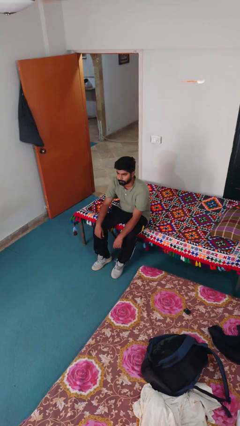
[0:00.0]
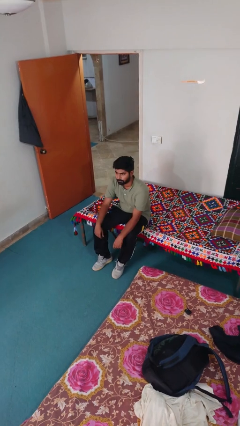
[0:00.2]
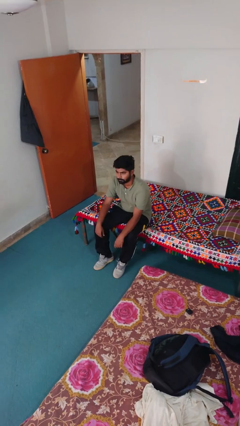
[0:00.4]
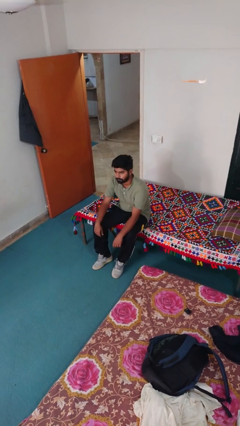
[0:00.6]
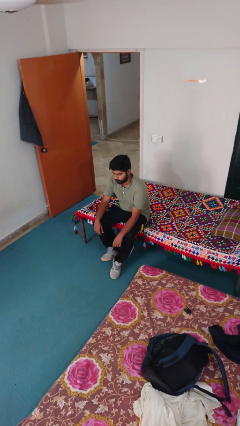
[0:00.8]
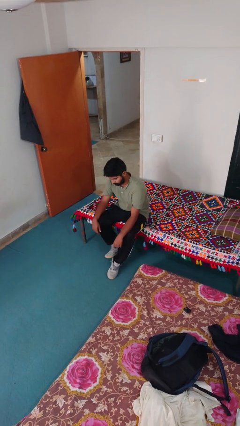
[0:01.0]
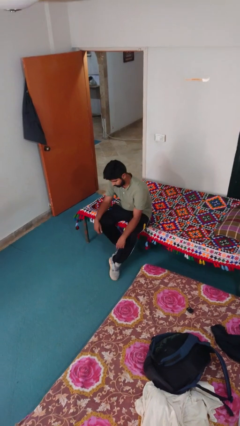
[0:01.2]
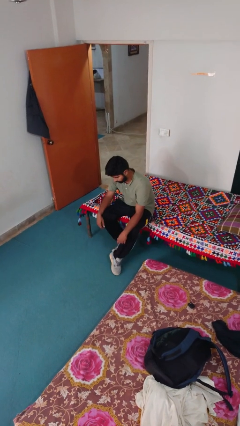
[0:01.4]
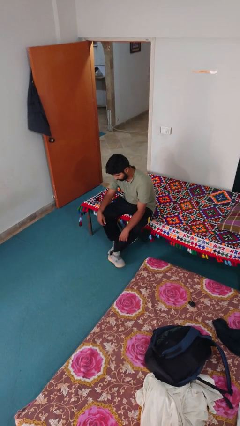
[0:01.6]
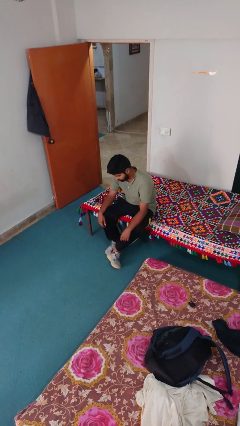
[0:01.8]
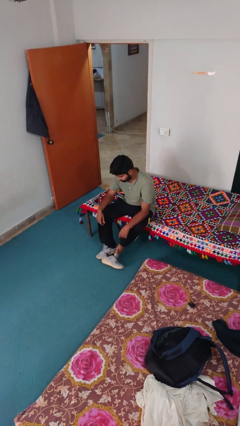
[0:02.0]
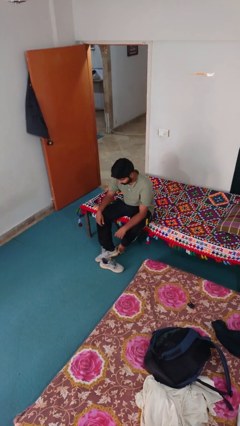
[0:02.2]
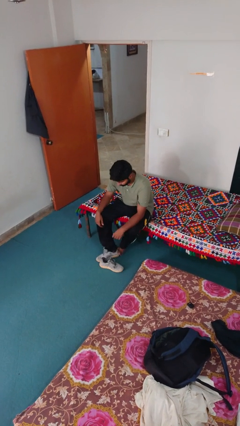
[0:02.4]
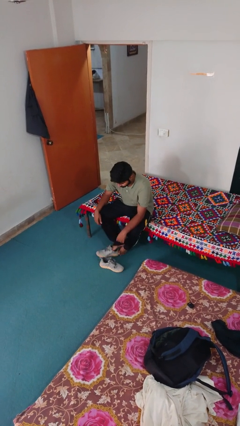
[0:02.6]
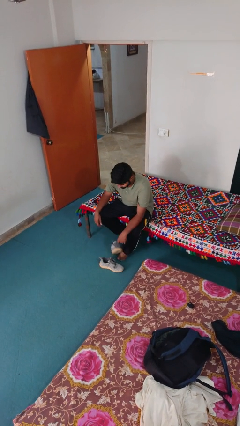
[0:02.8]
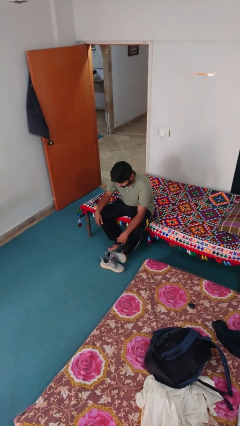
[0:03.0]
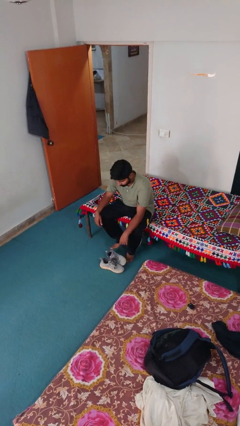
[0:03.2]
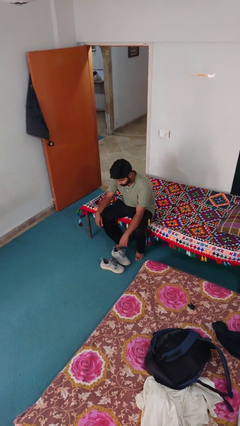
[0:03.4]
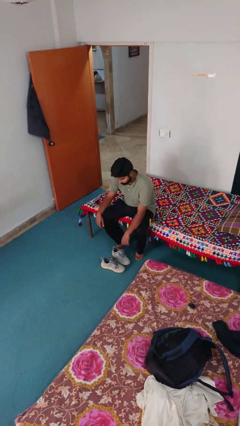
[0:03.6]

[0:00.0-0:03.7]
person takes off shoes

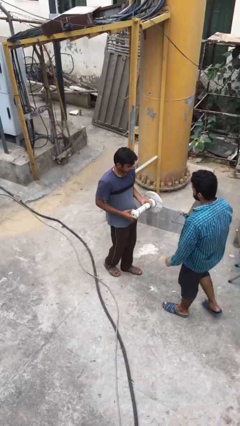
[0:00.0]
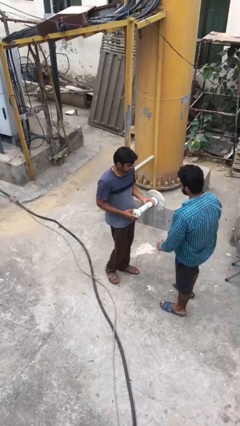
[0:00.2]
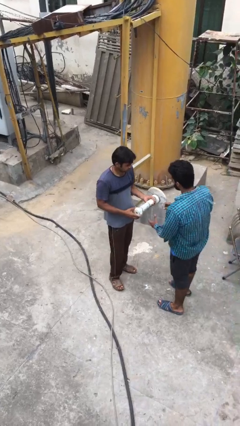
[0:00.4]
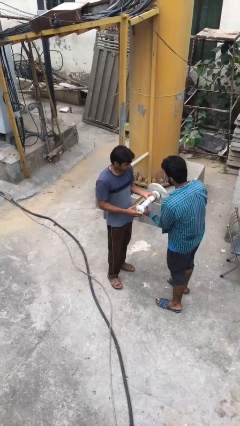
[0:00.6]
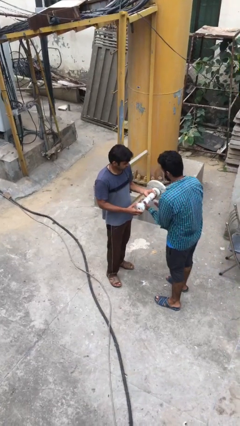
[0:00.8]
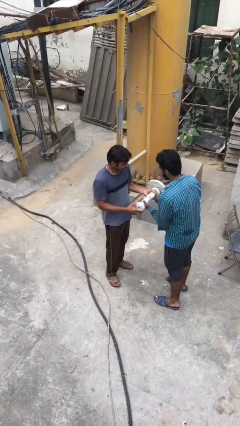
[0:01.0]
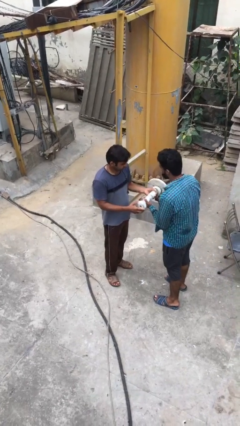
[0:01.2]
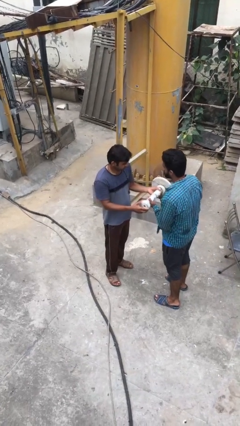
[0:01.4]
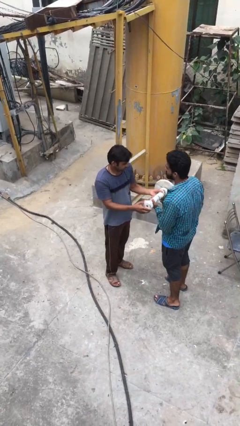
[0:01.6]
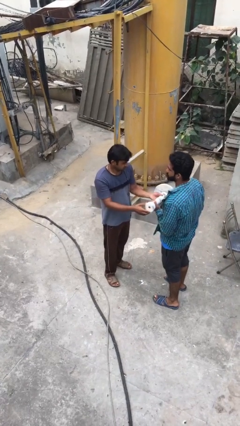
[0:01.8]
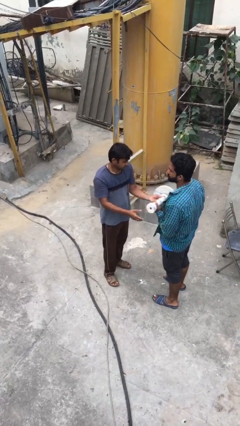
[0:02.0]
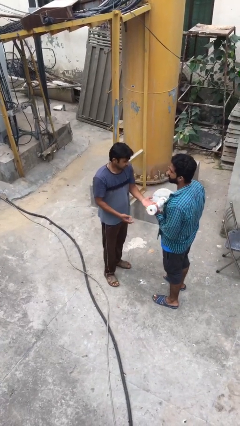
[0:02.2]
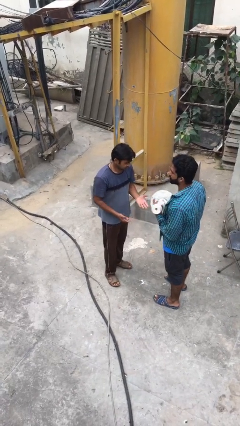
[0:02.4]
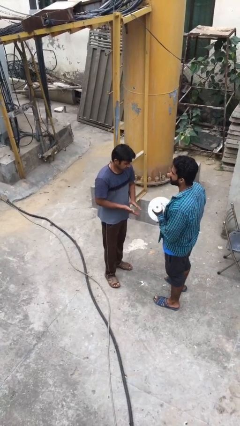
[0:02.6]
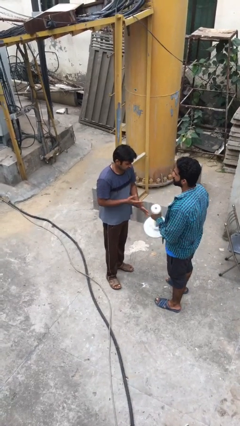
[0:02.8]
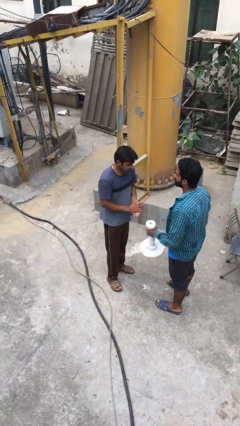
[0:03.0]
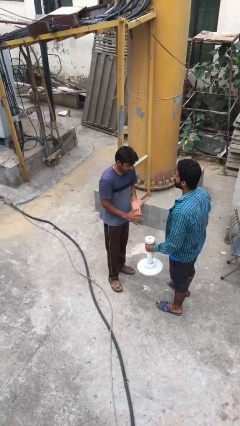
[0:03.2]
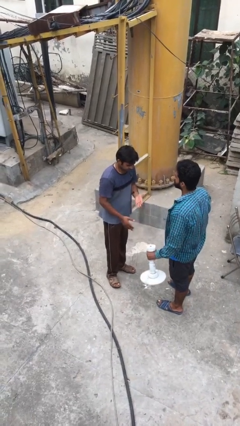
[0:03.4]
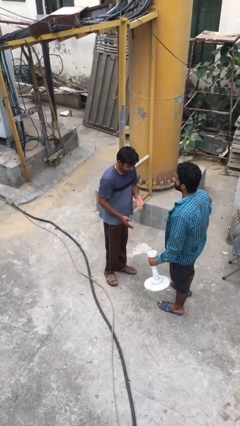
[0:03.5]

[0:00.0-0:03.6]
person transfers object to person

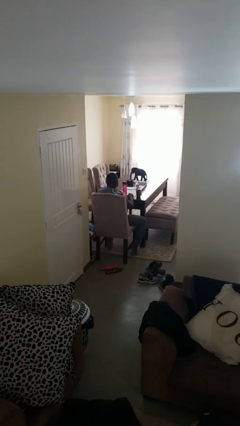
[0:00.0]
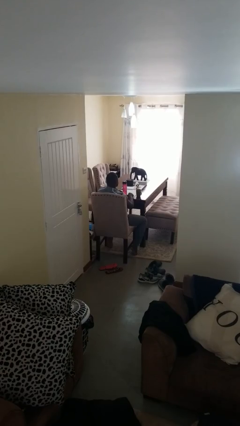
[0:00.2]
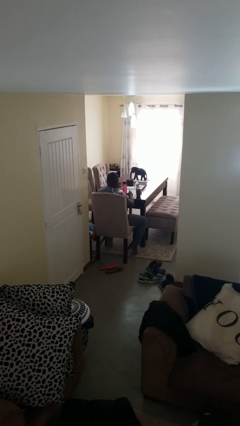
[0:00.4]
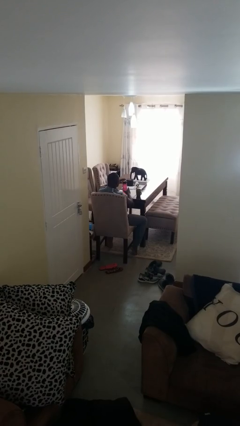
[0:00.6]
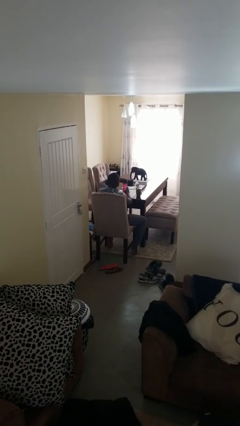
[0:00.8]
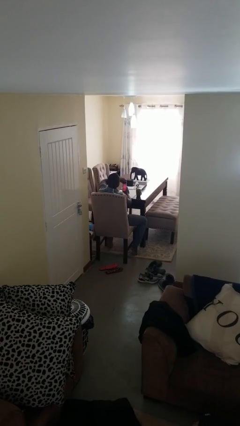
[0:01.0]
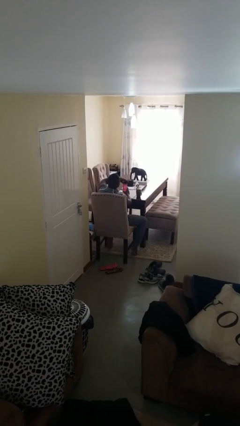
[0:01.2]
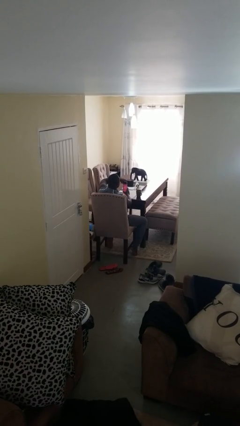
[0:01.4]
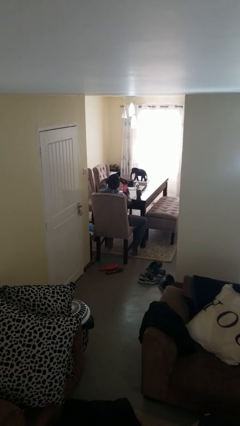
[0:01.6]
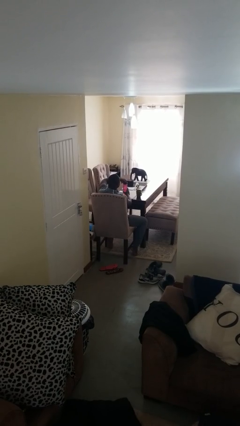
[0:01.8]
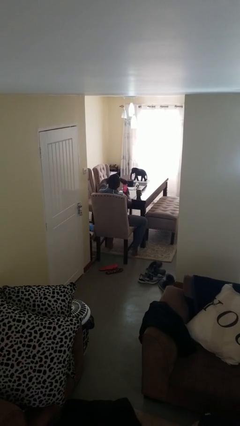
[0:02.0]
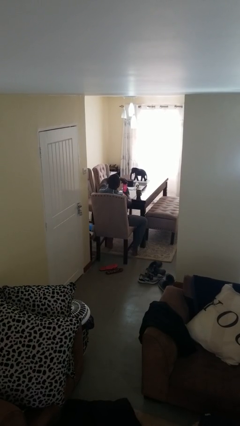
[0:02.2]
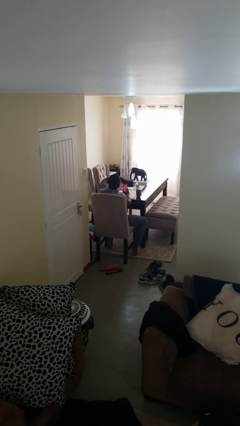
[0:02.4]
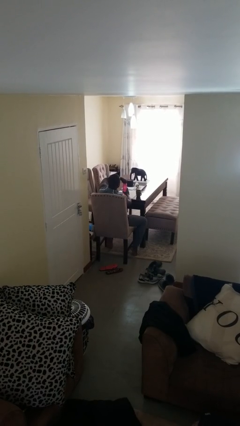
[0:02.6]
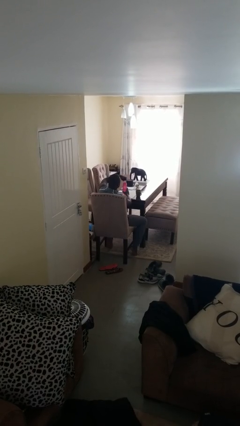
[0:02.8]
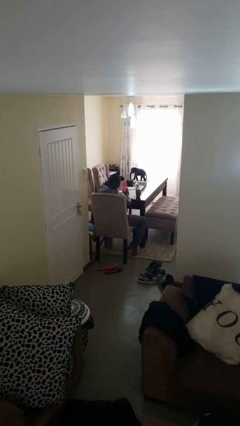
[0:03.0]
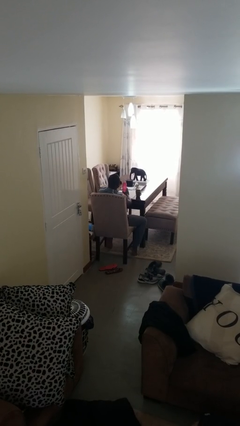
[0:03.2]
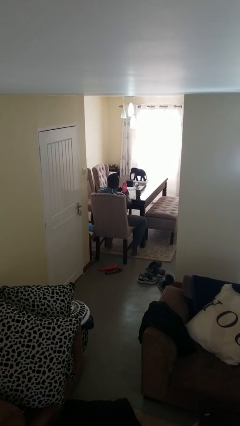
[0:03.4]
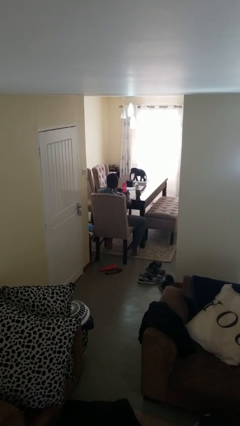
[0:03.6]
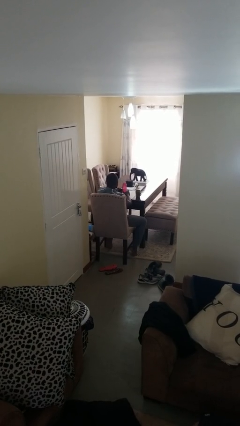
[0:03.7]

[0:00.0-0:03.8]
person unscrews lid from bottle

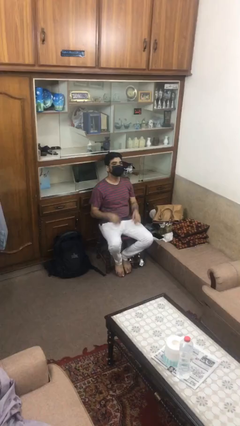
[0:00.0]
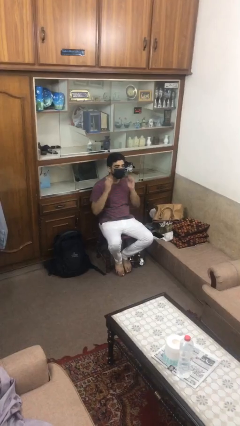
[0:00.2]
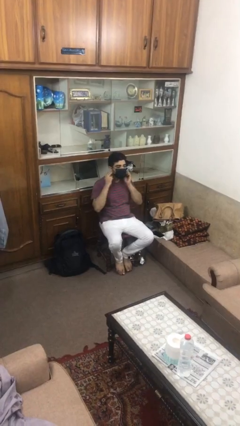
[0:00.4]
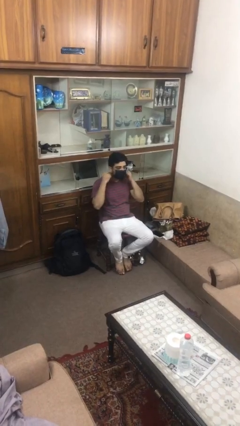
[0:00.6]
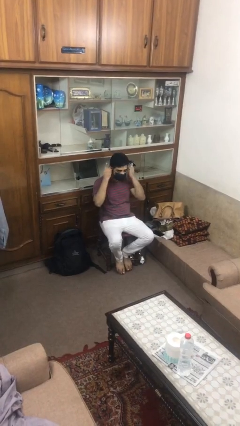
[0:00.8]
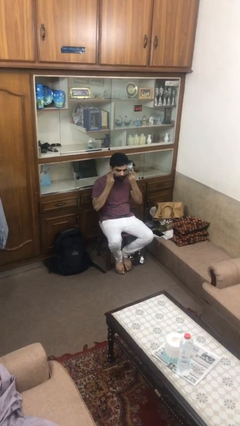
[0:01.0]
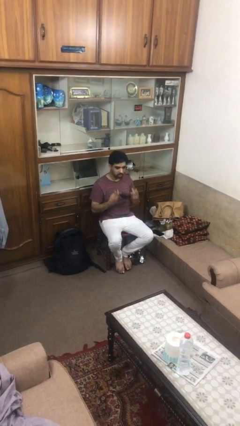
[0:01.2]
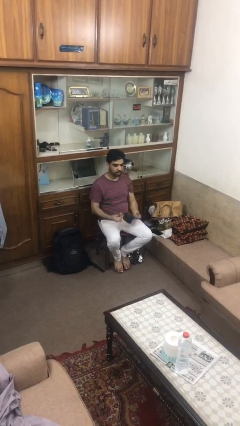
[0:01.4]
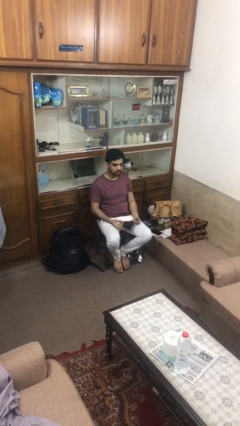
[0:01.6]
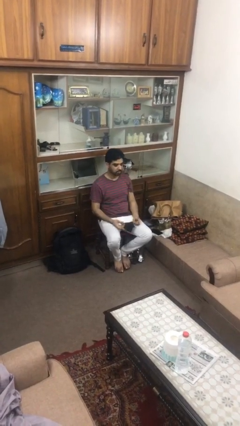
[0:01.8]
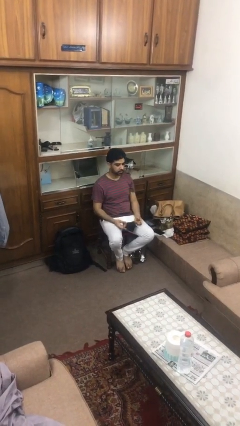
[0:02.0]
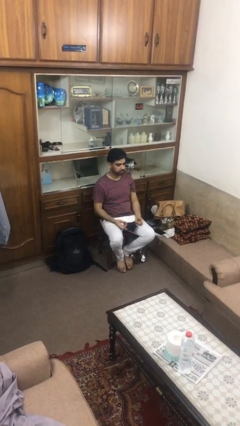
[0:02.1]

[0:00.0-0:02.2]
person takes off facemask

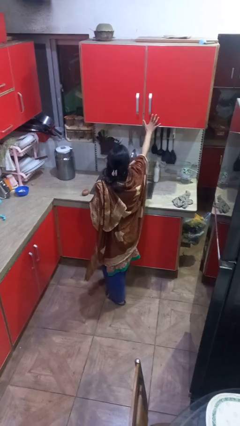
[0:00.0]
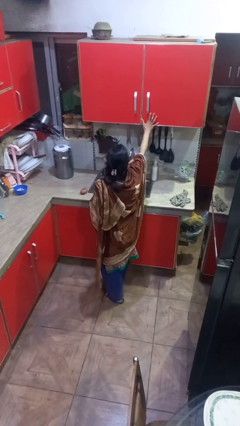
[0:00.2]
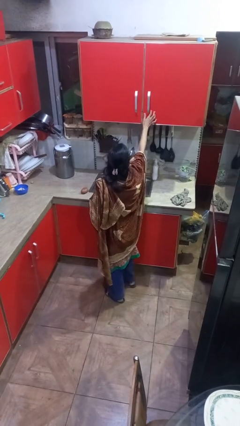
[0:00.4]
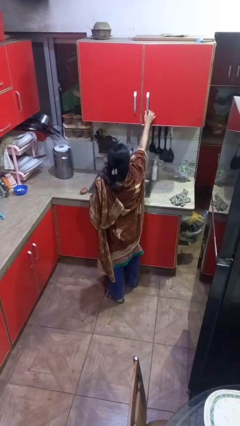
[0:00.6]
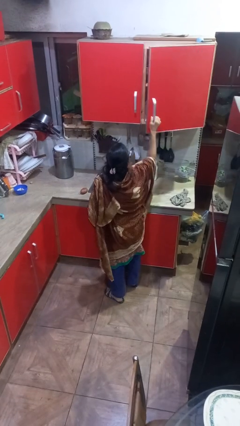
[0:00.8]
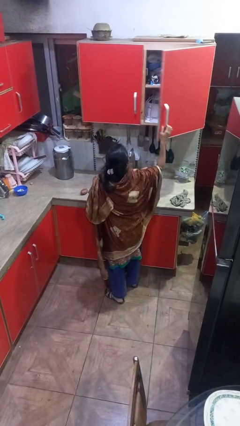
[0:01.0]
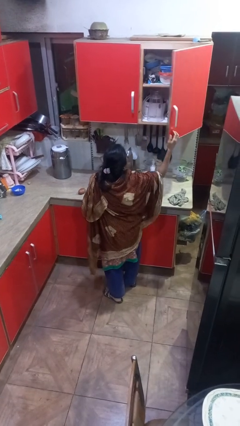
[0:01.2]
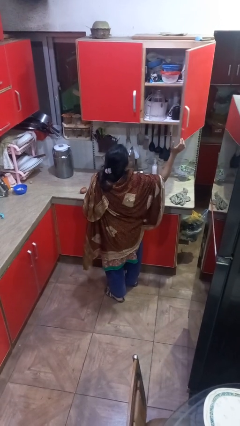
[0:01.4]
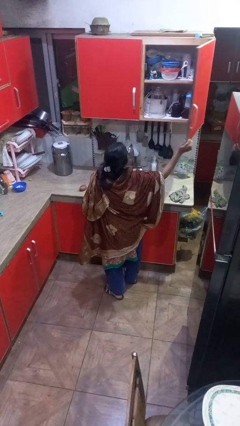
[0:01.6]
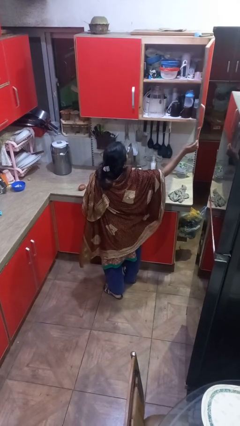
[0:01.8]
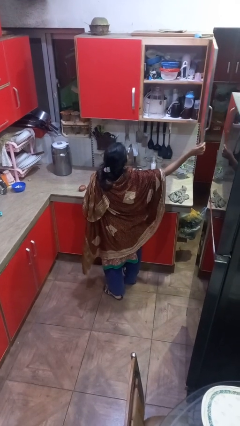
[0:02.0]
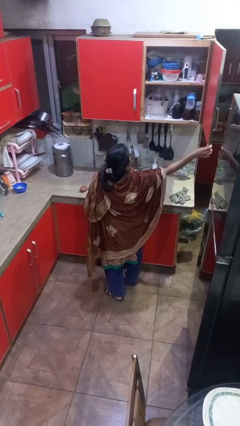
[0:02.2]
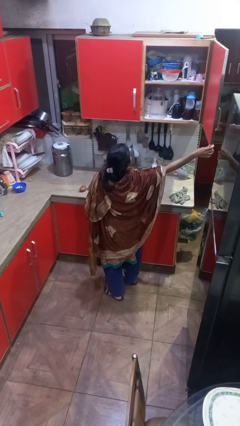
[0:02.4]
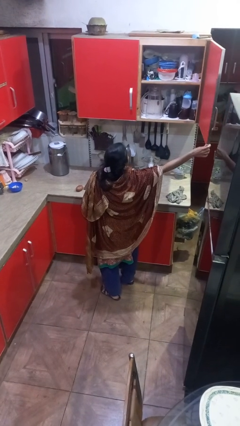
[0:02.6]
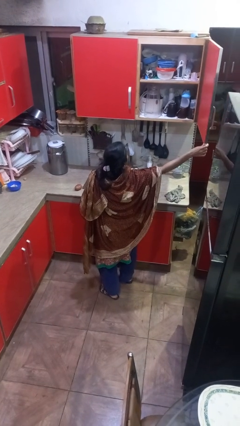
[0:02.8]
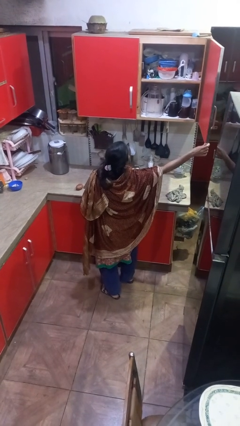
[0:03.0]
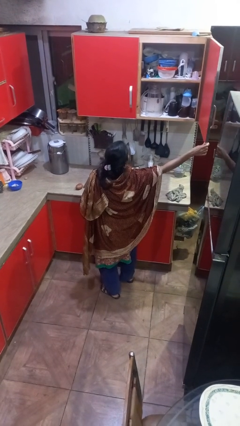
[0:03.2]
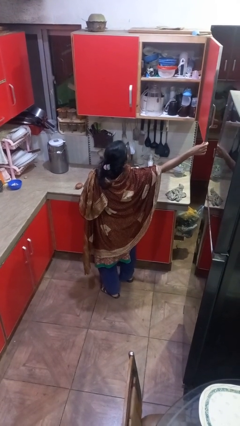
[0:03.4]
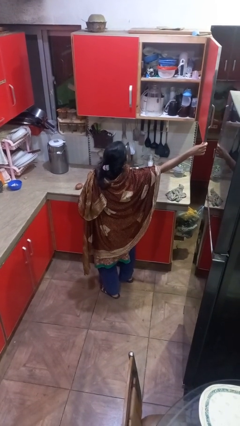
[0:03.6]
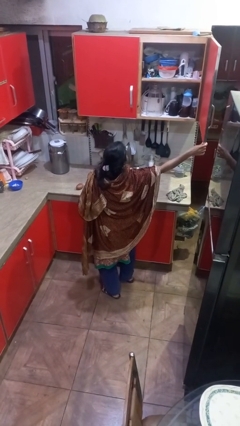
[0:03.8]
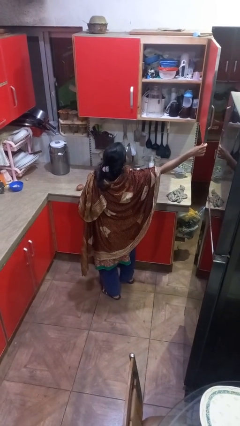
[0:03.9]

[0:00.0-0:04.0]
person opens cabinet

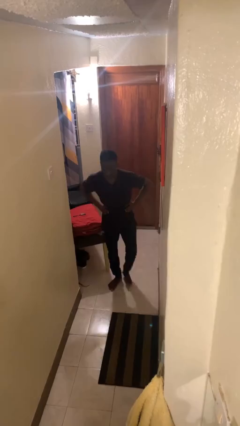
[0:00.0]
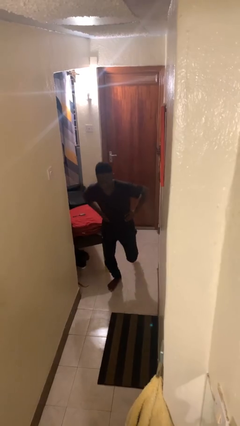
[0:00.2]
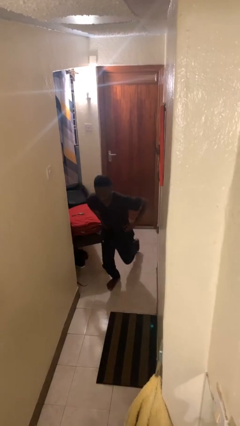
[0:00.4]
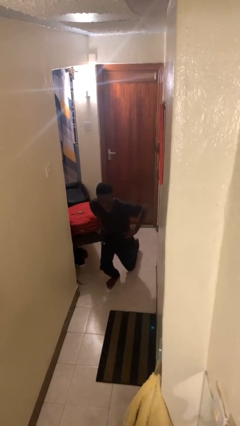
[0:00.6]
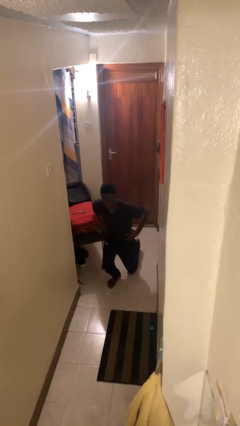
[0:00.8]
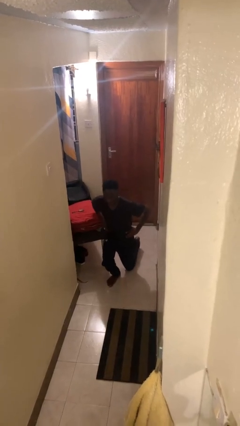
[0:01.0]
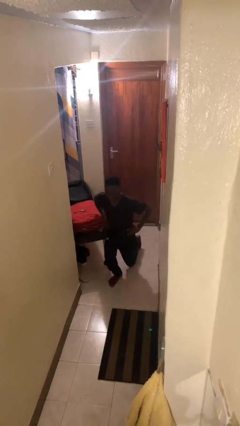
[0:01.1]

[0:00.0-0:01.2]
person exercises with lunges
